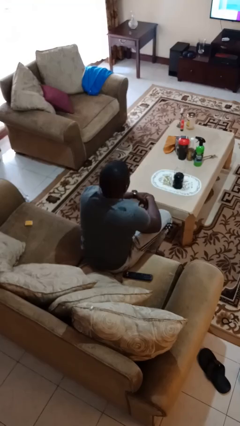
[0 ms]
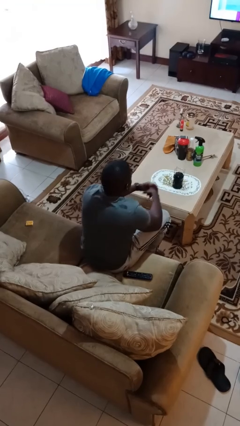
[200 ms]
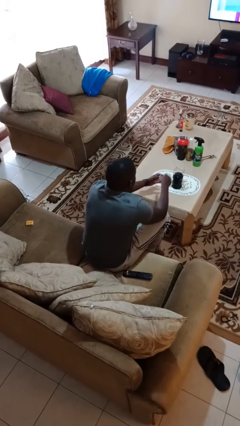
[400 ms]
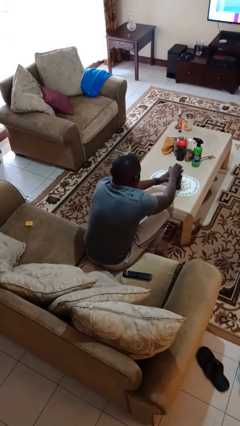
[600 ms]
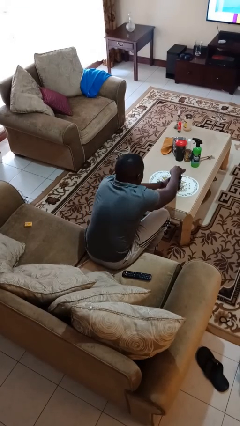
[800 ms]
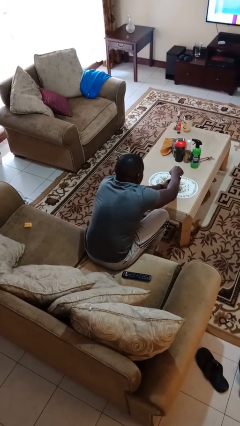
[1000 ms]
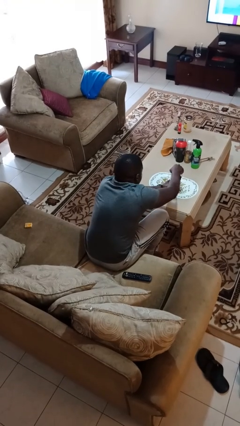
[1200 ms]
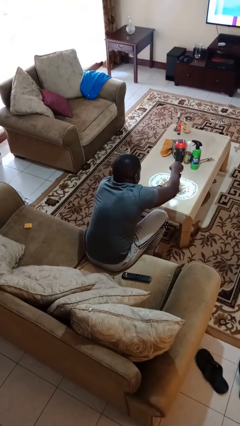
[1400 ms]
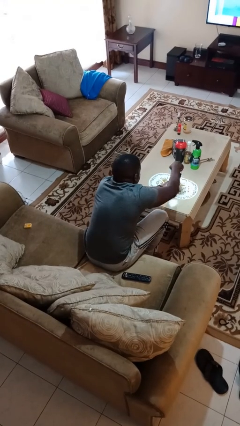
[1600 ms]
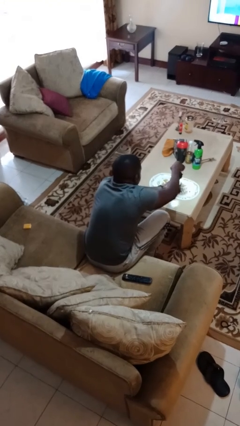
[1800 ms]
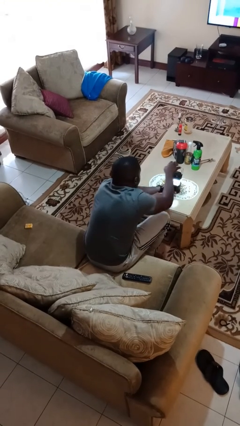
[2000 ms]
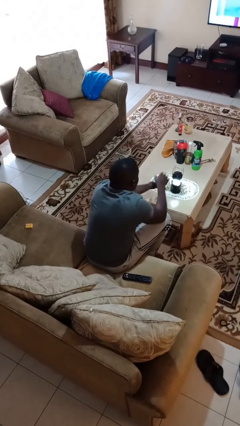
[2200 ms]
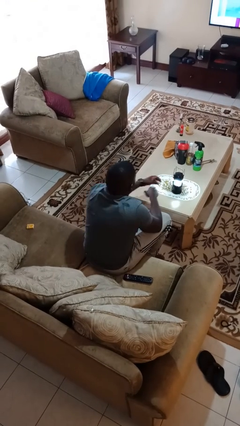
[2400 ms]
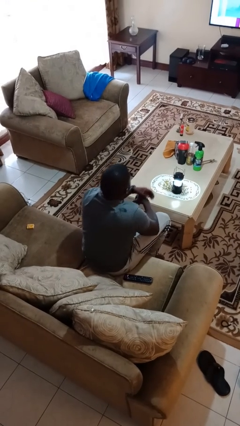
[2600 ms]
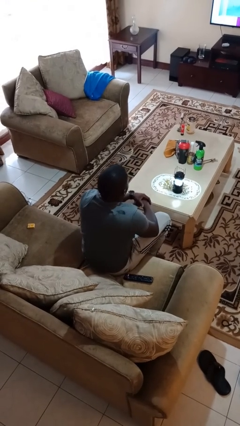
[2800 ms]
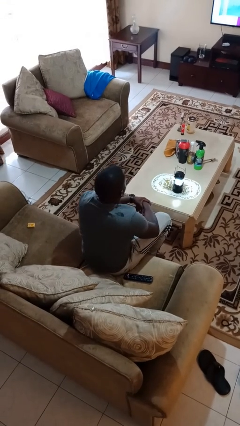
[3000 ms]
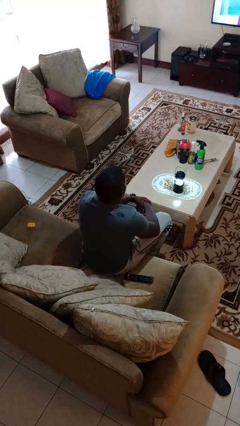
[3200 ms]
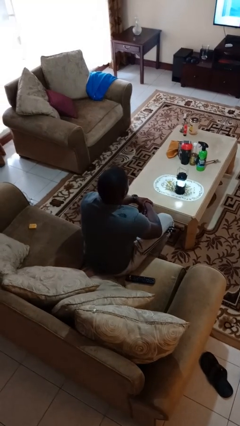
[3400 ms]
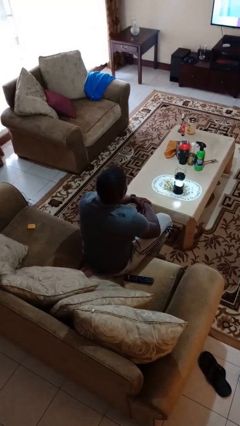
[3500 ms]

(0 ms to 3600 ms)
person turns on lamp

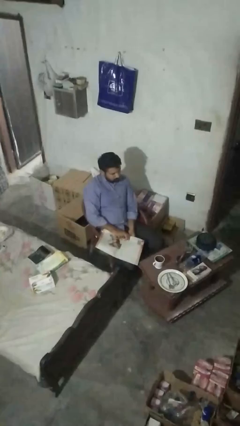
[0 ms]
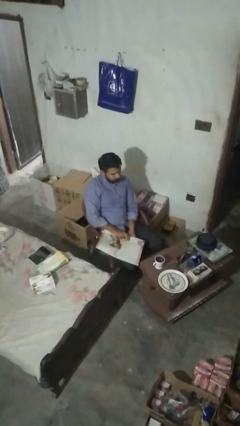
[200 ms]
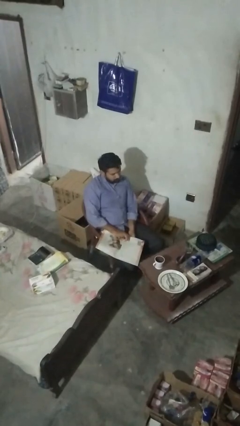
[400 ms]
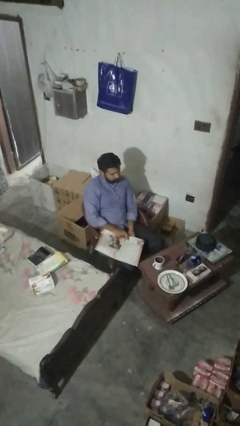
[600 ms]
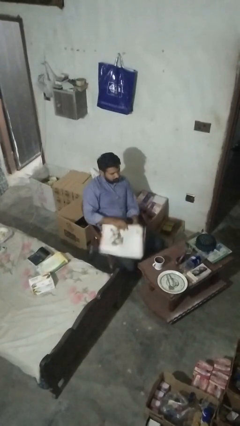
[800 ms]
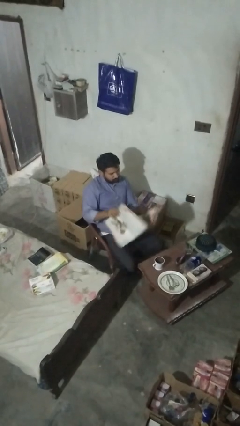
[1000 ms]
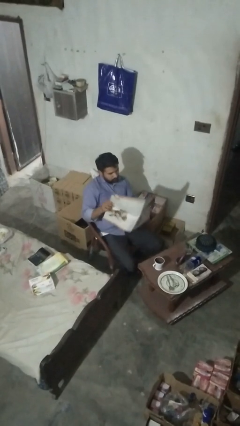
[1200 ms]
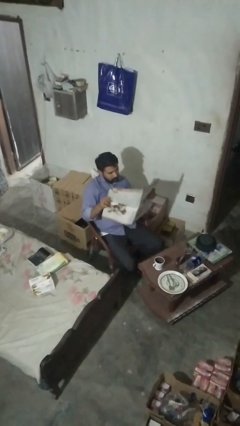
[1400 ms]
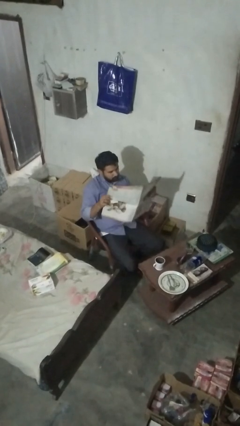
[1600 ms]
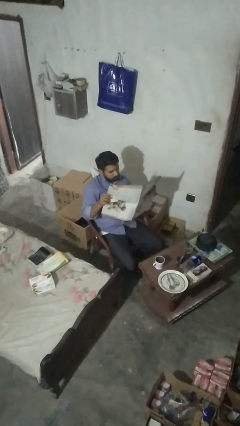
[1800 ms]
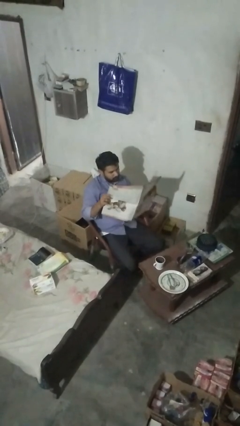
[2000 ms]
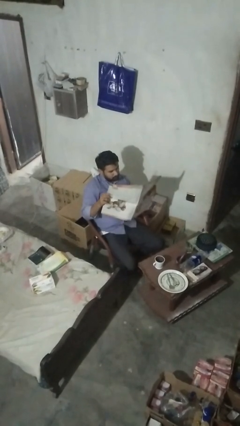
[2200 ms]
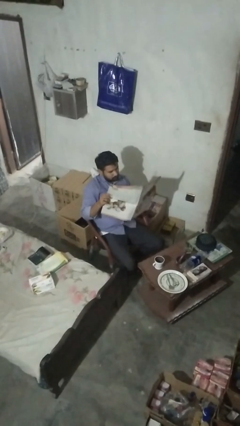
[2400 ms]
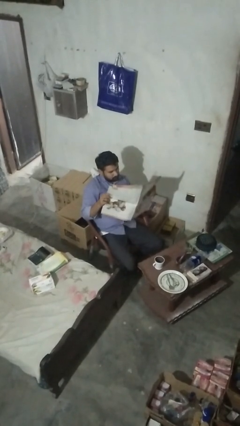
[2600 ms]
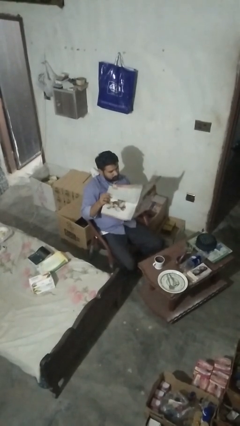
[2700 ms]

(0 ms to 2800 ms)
person reads newspaper

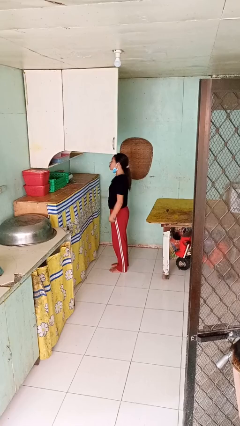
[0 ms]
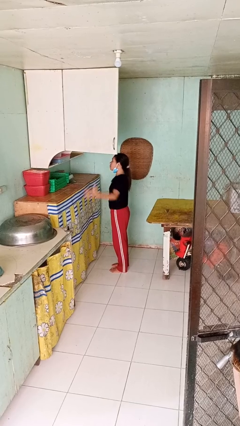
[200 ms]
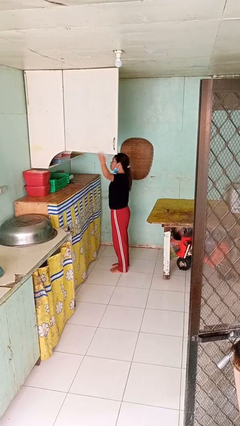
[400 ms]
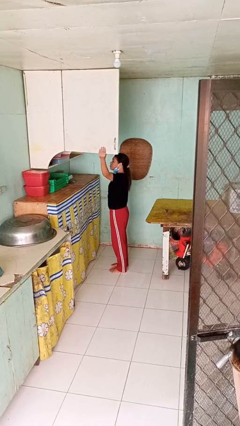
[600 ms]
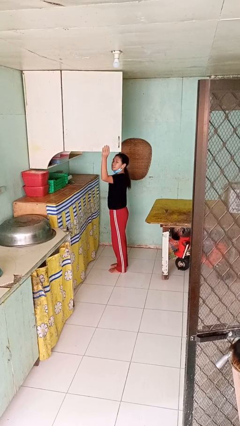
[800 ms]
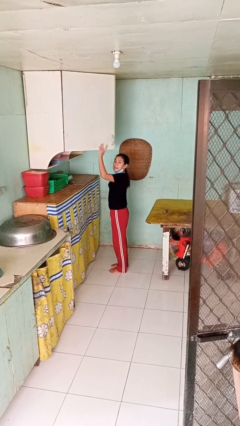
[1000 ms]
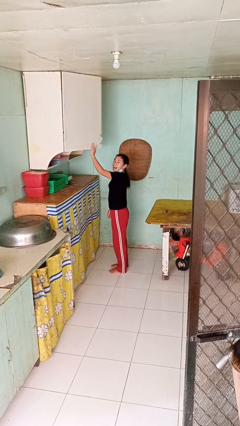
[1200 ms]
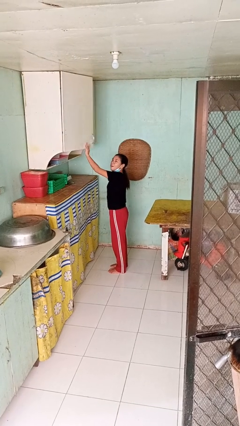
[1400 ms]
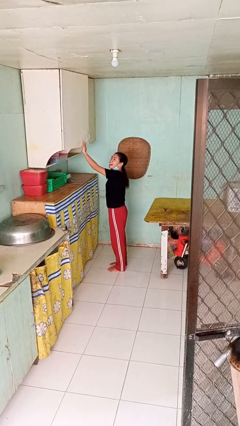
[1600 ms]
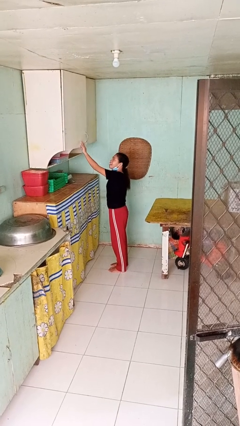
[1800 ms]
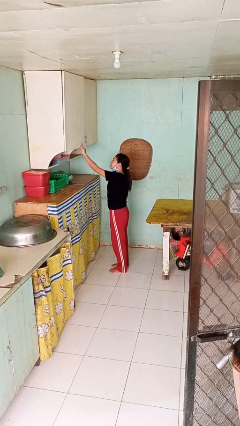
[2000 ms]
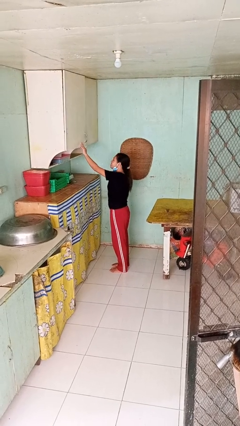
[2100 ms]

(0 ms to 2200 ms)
person closes cabinet

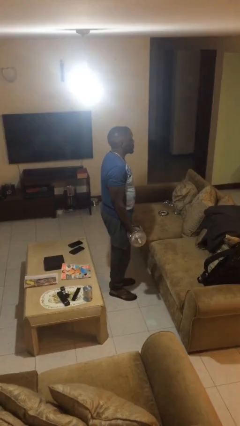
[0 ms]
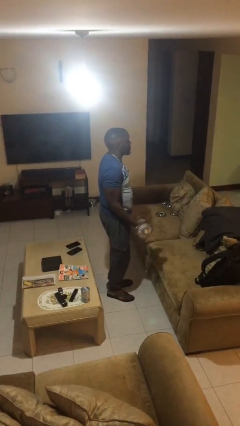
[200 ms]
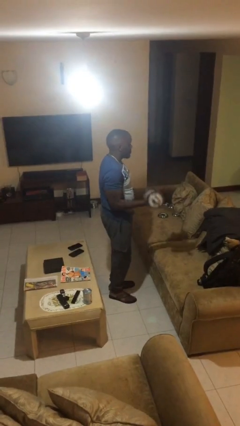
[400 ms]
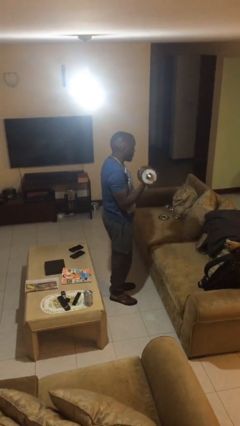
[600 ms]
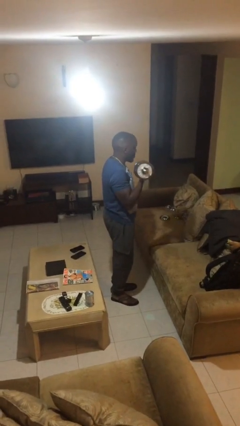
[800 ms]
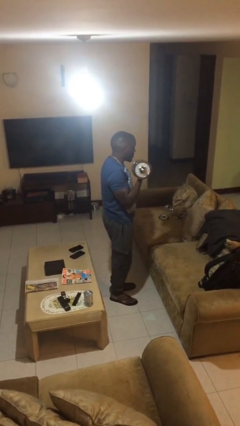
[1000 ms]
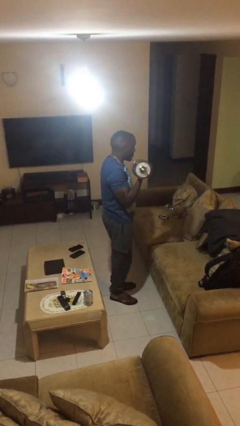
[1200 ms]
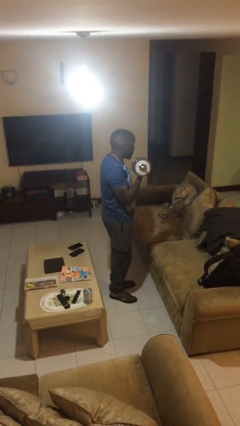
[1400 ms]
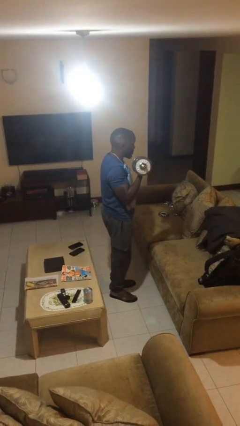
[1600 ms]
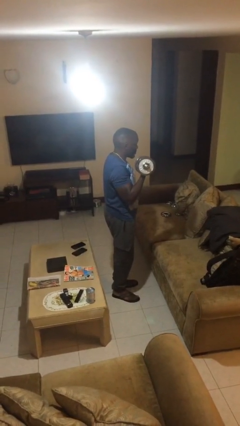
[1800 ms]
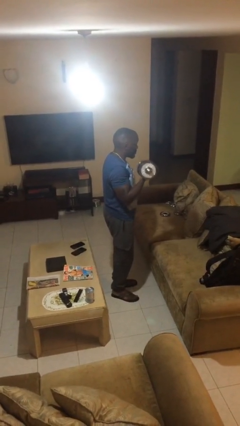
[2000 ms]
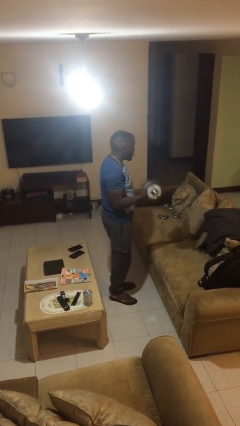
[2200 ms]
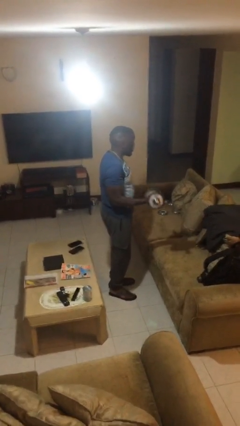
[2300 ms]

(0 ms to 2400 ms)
person lifts dumbbells

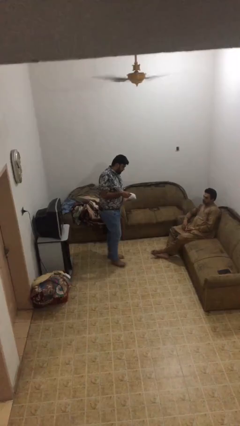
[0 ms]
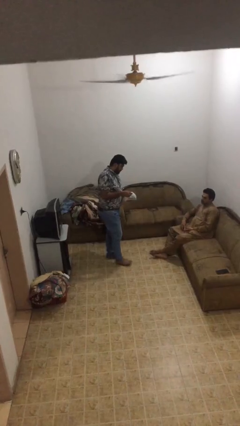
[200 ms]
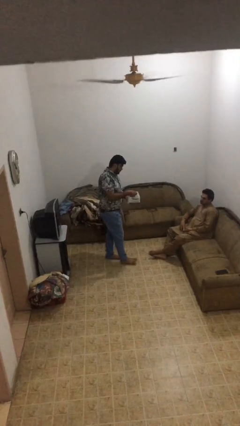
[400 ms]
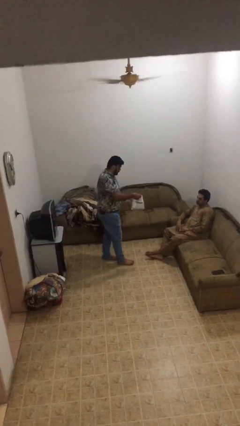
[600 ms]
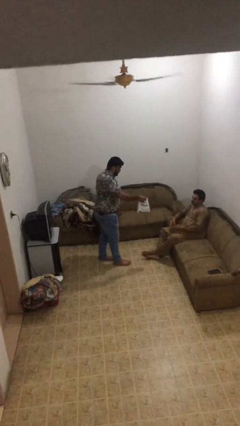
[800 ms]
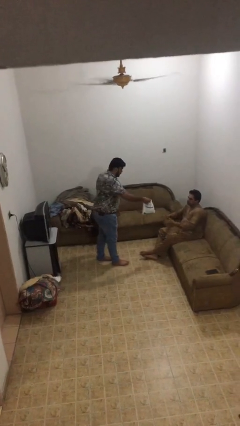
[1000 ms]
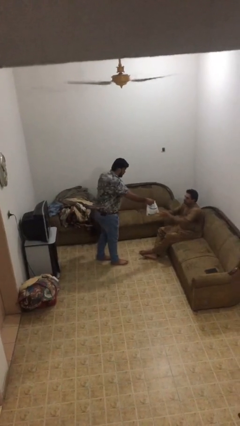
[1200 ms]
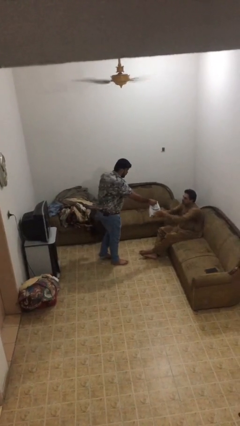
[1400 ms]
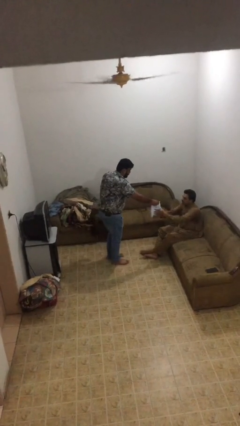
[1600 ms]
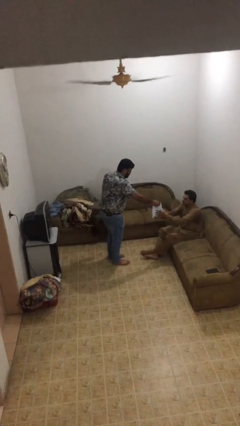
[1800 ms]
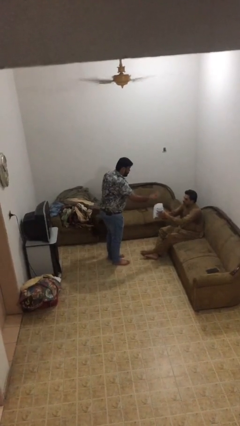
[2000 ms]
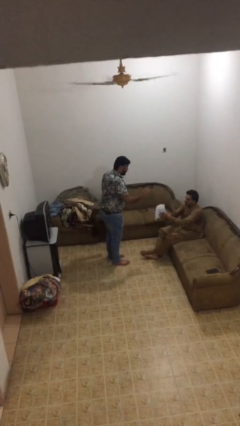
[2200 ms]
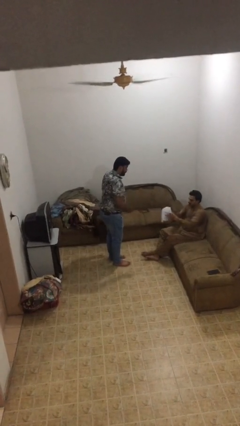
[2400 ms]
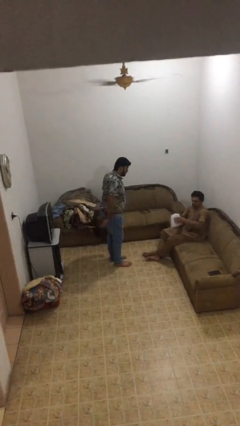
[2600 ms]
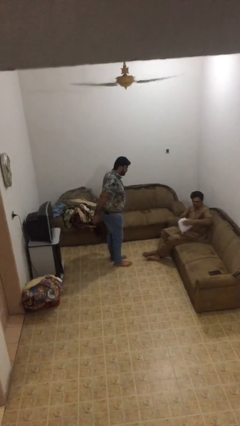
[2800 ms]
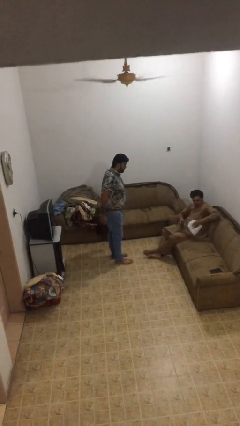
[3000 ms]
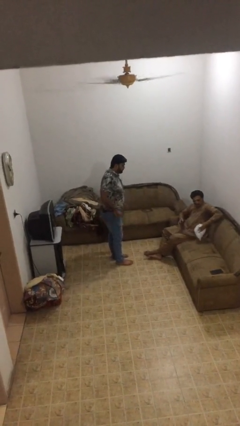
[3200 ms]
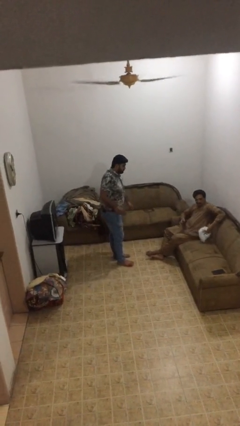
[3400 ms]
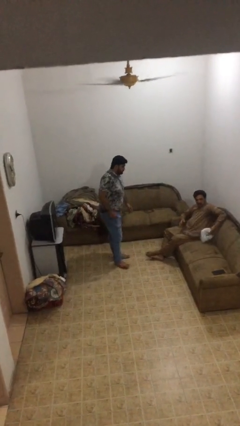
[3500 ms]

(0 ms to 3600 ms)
person transfers object to person

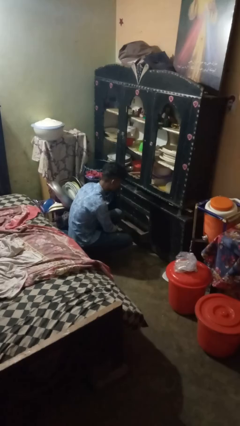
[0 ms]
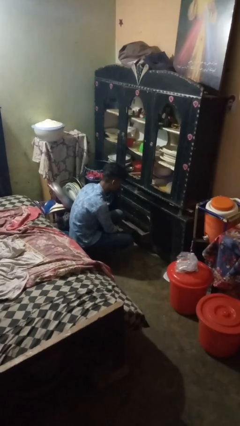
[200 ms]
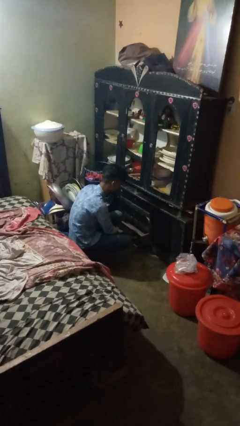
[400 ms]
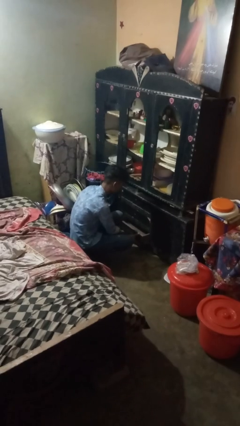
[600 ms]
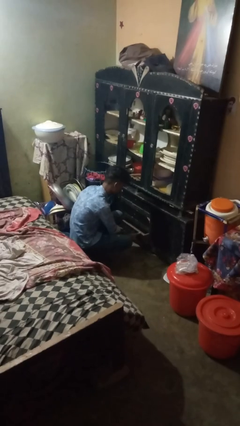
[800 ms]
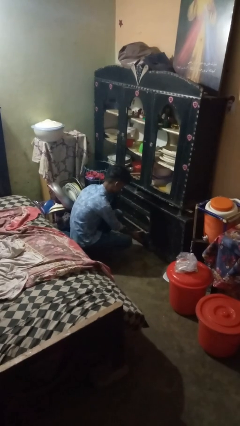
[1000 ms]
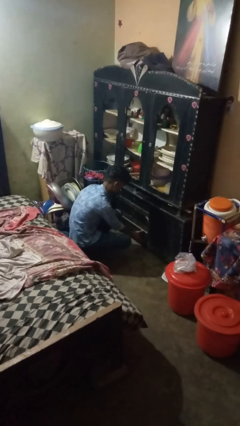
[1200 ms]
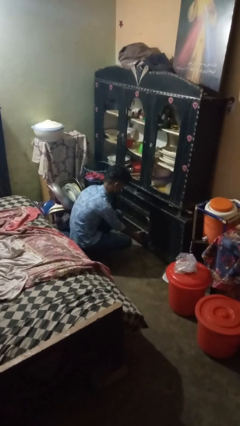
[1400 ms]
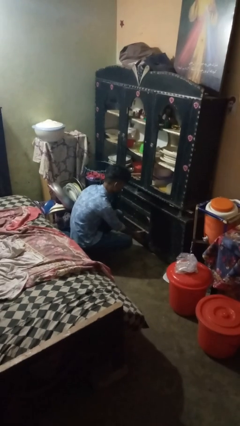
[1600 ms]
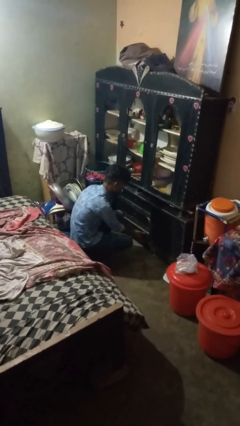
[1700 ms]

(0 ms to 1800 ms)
person closes kitchen drawer

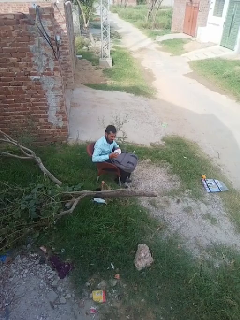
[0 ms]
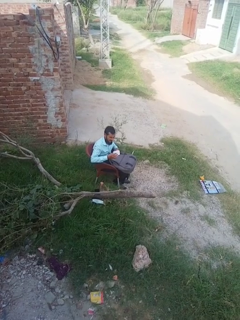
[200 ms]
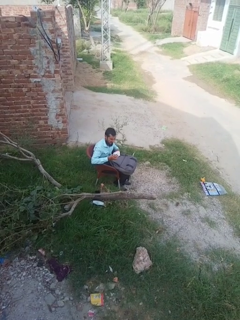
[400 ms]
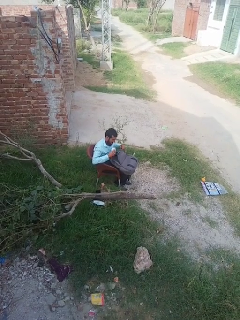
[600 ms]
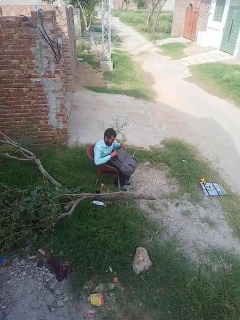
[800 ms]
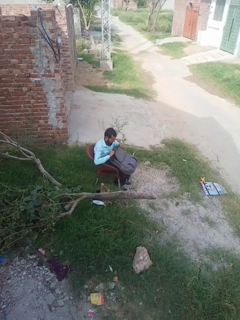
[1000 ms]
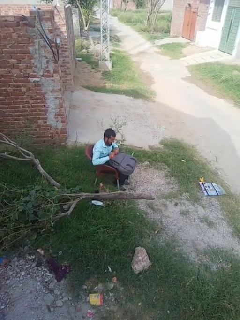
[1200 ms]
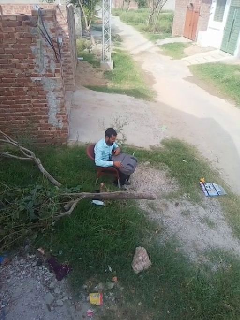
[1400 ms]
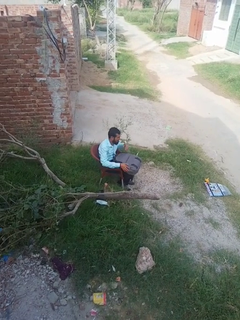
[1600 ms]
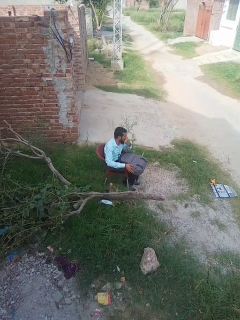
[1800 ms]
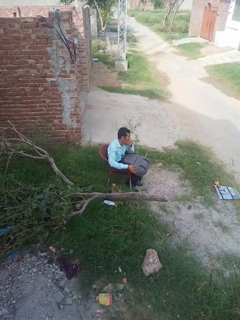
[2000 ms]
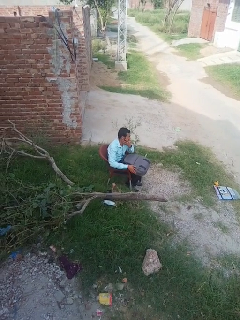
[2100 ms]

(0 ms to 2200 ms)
person puts object into backpack
